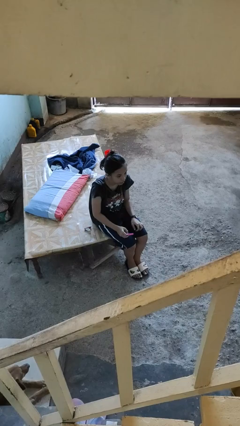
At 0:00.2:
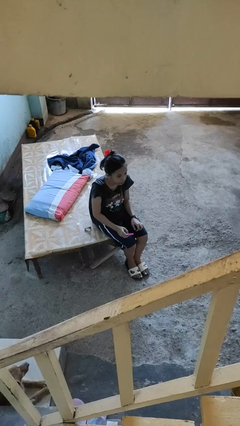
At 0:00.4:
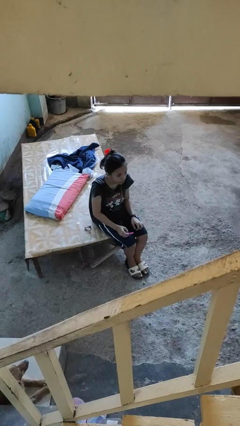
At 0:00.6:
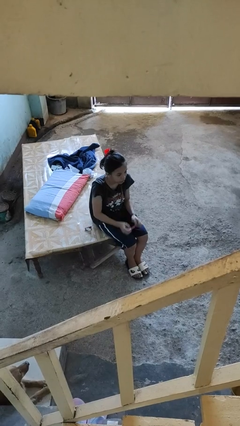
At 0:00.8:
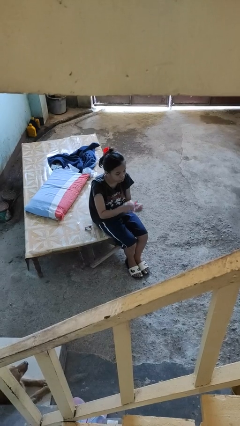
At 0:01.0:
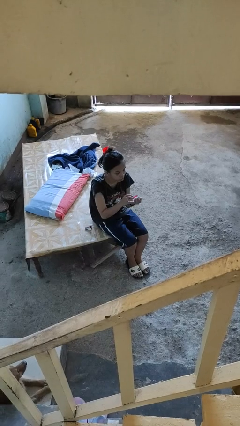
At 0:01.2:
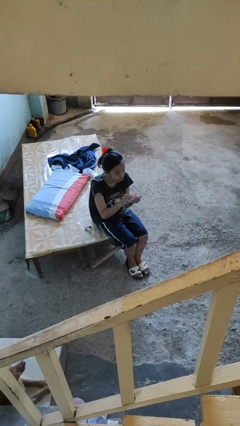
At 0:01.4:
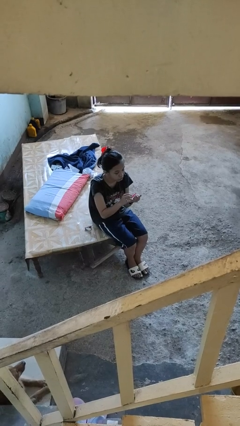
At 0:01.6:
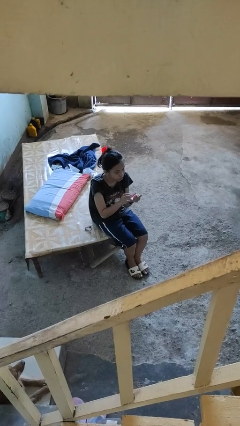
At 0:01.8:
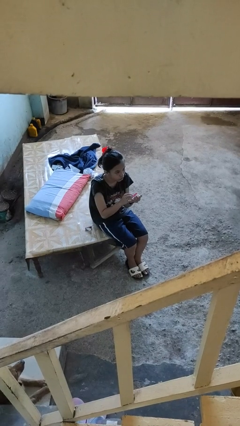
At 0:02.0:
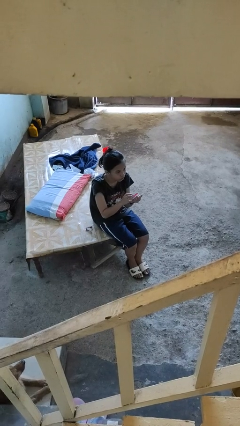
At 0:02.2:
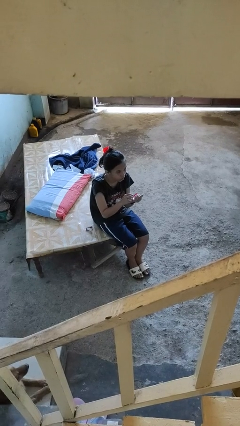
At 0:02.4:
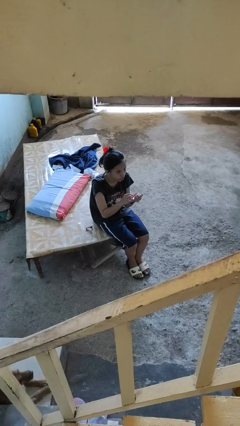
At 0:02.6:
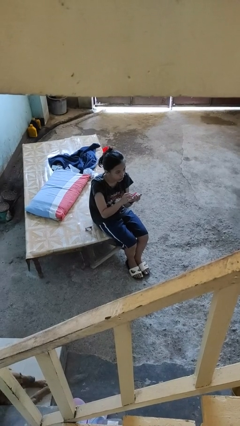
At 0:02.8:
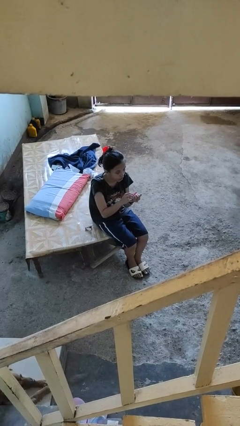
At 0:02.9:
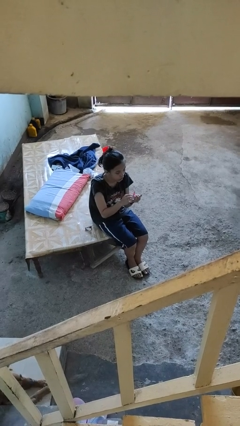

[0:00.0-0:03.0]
person files fingernails

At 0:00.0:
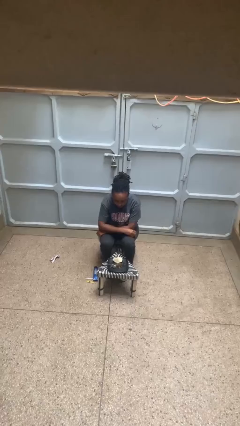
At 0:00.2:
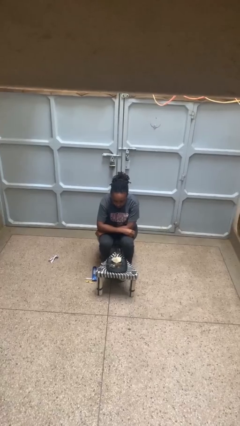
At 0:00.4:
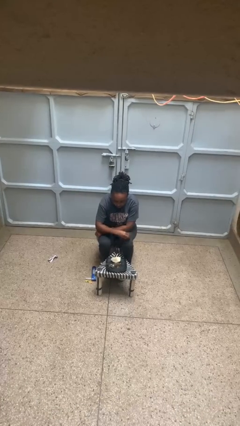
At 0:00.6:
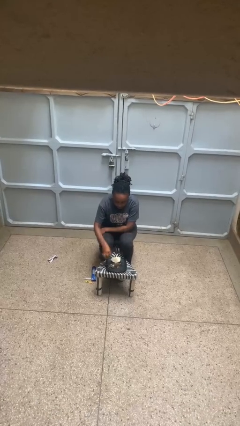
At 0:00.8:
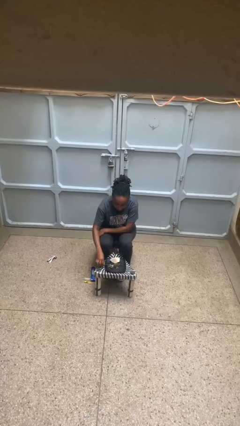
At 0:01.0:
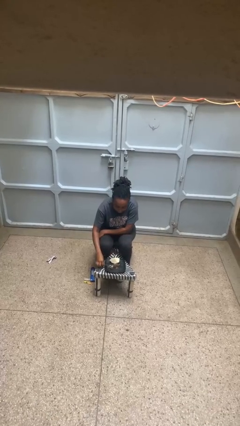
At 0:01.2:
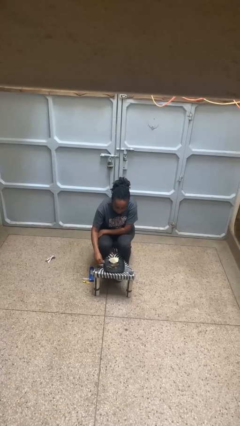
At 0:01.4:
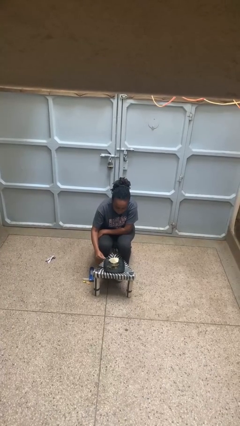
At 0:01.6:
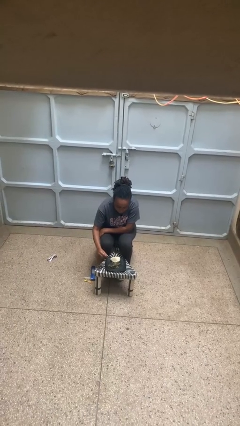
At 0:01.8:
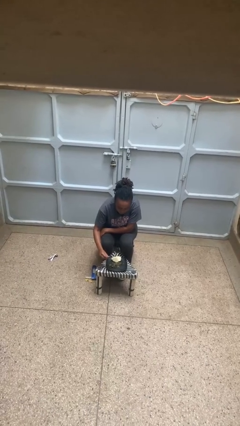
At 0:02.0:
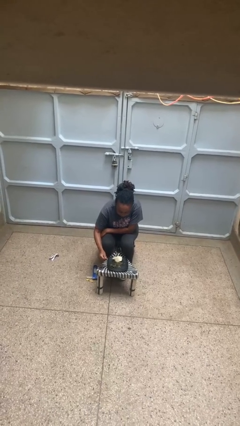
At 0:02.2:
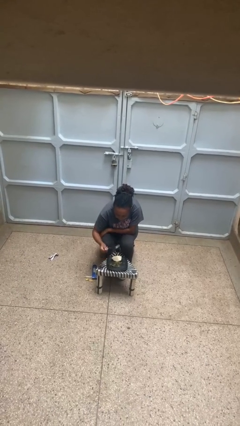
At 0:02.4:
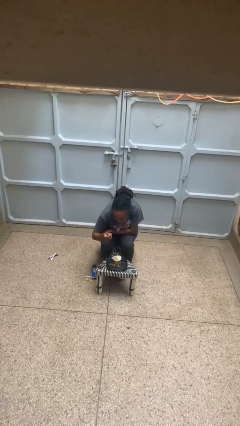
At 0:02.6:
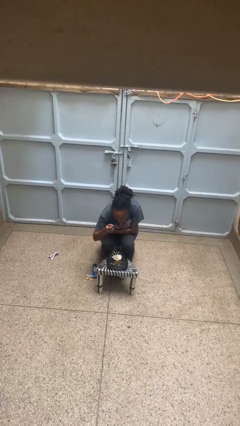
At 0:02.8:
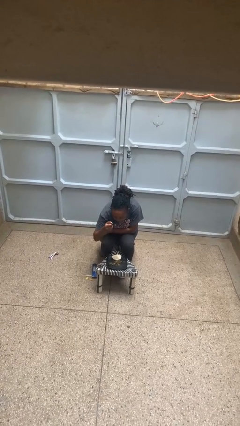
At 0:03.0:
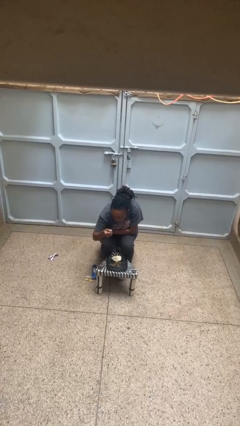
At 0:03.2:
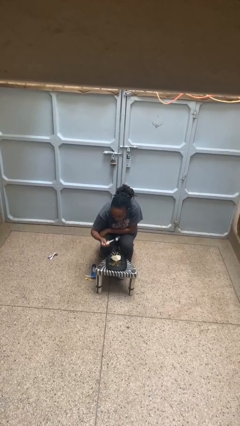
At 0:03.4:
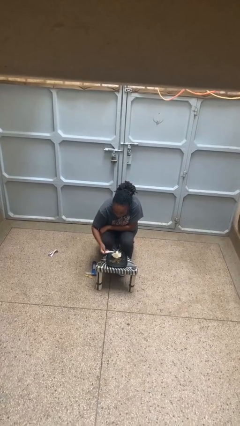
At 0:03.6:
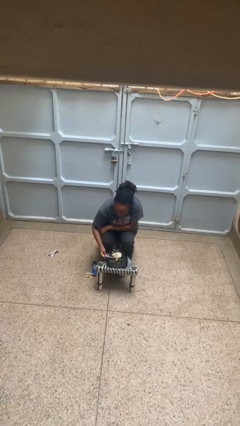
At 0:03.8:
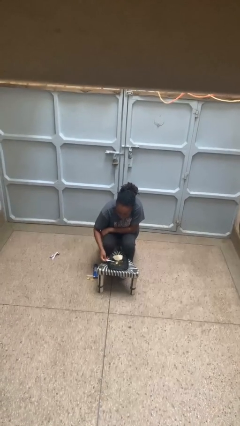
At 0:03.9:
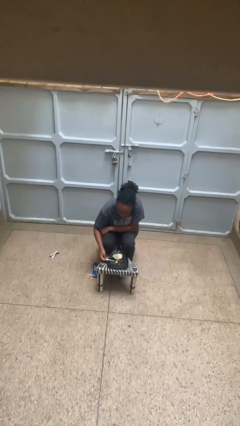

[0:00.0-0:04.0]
person eats with utensil

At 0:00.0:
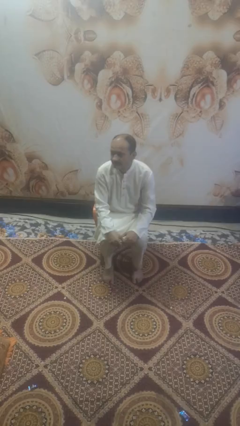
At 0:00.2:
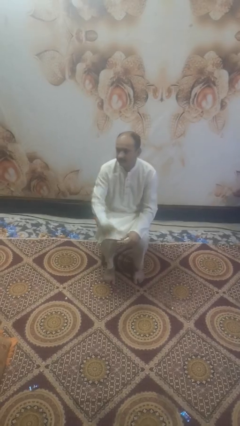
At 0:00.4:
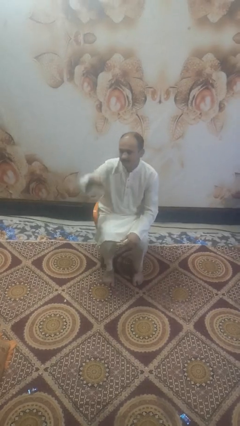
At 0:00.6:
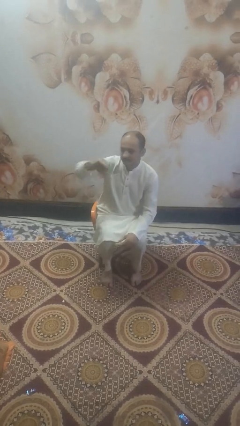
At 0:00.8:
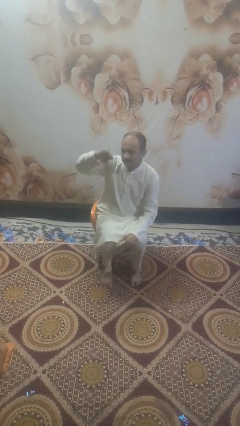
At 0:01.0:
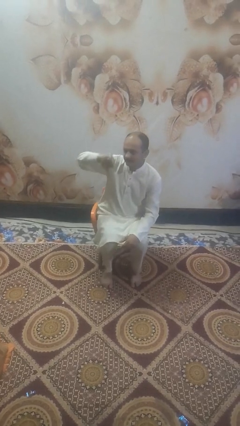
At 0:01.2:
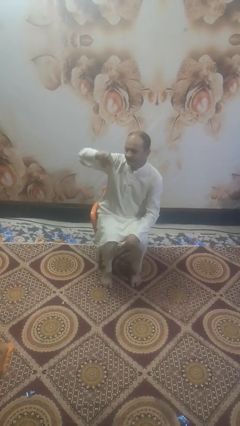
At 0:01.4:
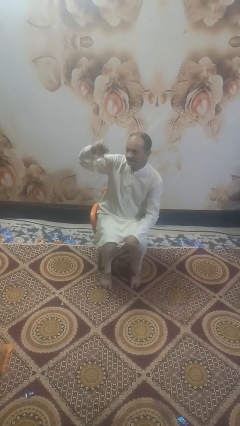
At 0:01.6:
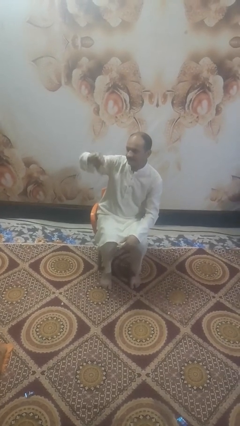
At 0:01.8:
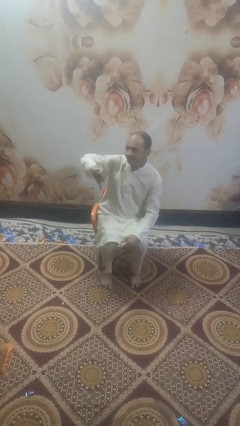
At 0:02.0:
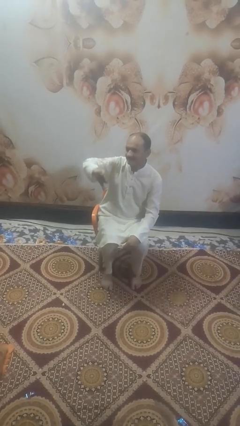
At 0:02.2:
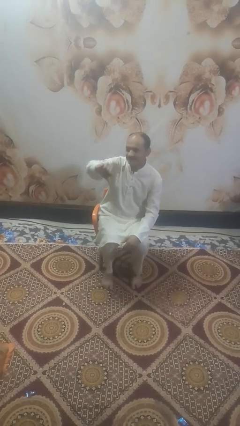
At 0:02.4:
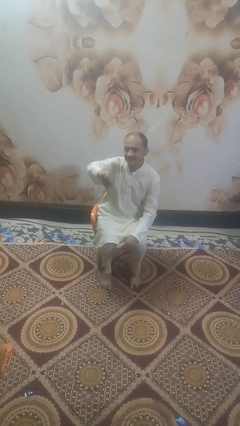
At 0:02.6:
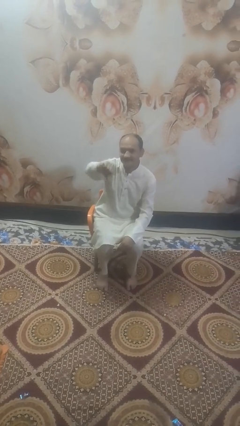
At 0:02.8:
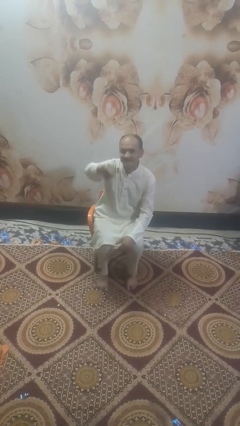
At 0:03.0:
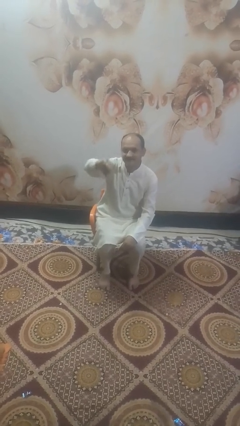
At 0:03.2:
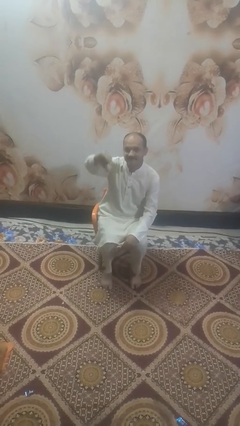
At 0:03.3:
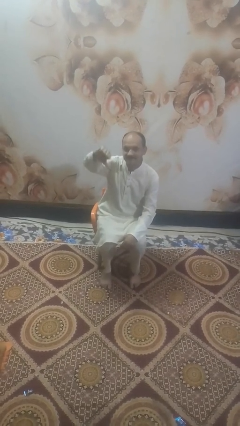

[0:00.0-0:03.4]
person gestures thumbs down

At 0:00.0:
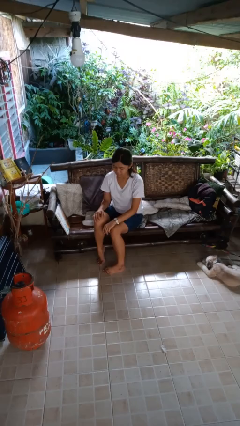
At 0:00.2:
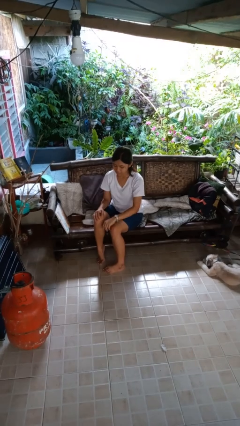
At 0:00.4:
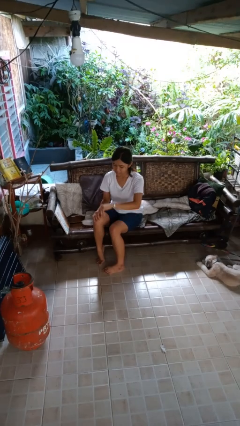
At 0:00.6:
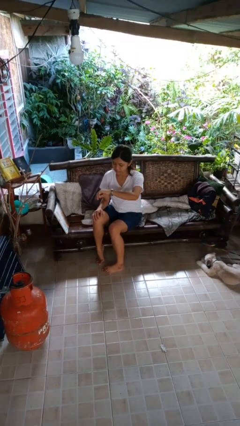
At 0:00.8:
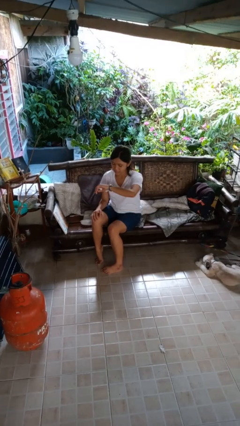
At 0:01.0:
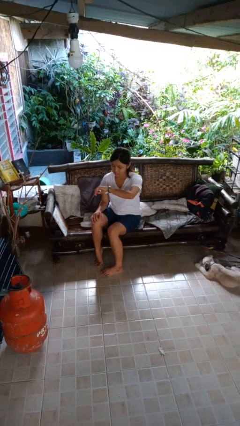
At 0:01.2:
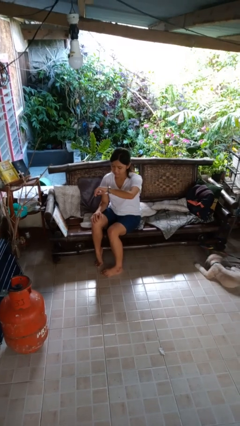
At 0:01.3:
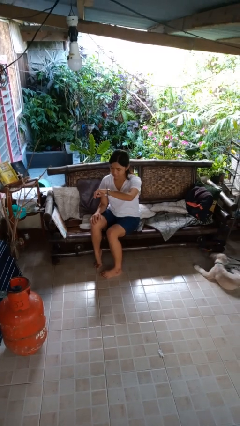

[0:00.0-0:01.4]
person looks at wristwatch

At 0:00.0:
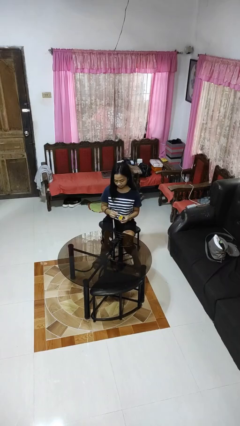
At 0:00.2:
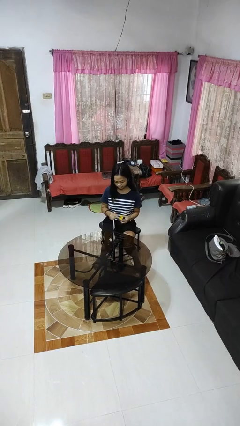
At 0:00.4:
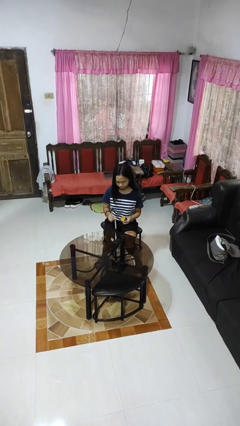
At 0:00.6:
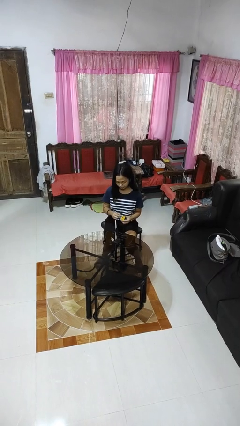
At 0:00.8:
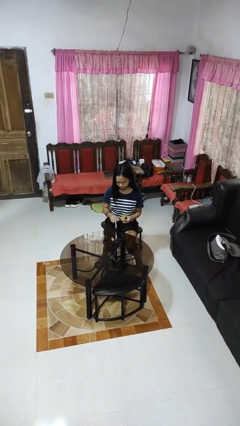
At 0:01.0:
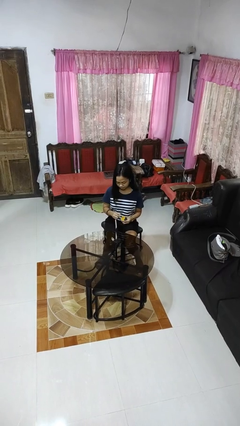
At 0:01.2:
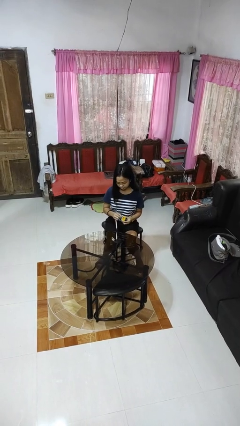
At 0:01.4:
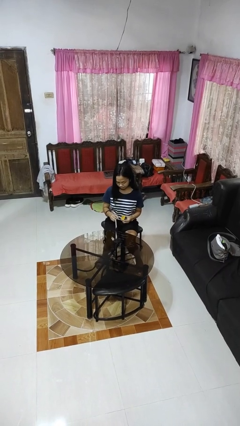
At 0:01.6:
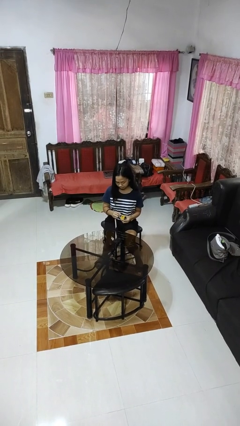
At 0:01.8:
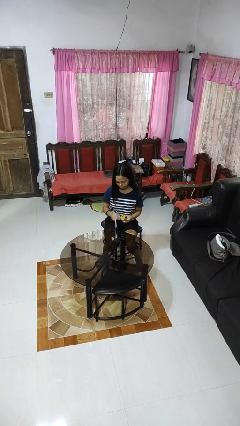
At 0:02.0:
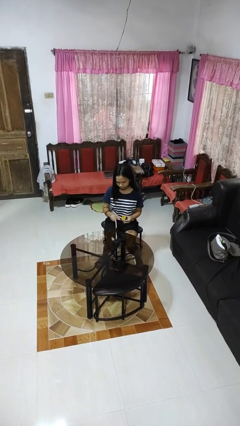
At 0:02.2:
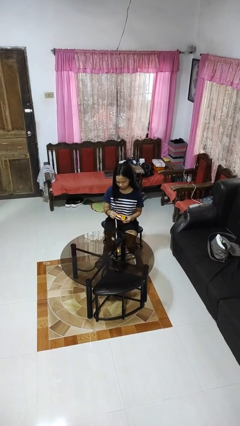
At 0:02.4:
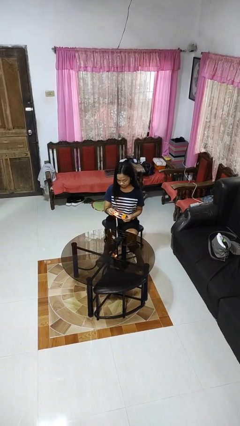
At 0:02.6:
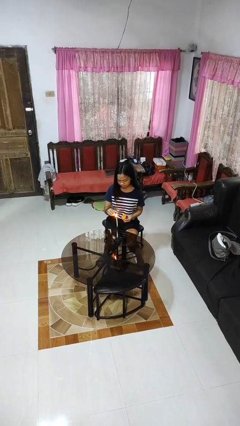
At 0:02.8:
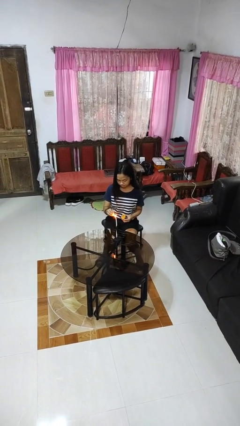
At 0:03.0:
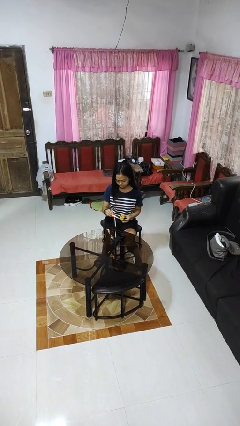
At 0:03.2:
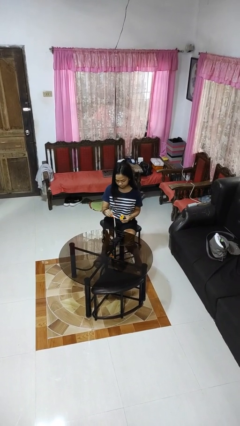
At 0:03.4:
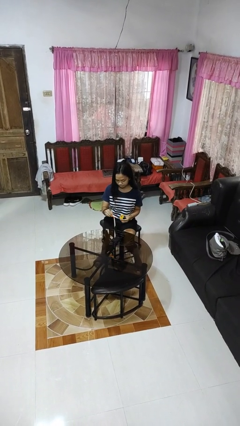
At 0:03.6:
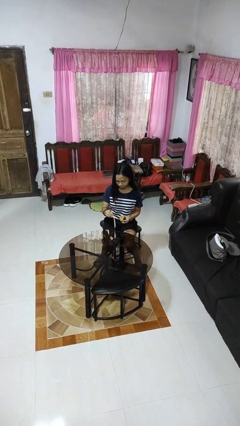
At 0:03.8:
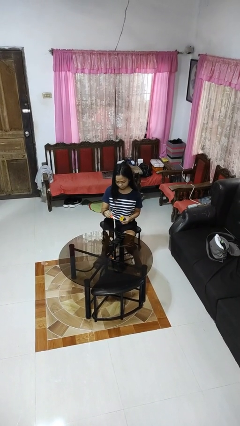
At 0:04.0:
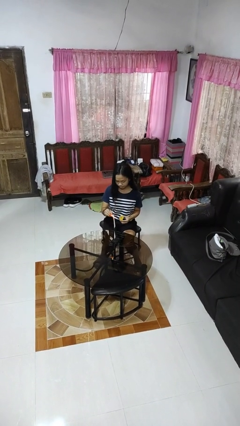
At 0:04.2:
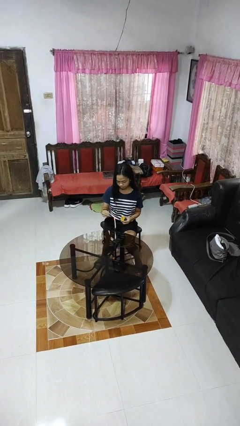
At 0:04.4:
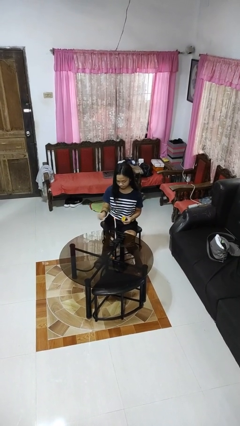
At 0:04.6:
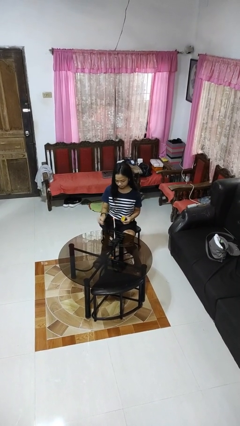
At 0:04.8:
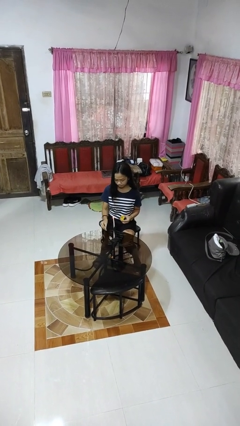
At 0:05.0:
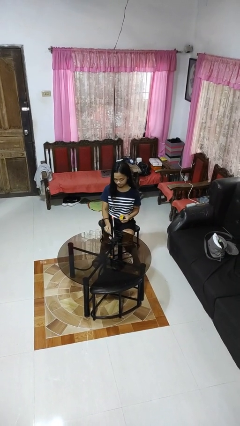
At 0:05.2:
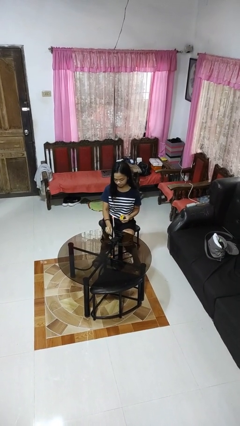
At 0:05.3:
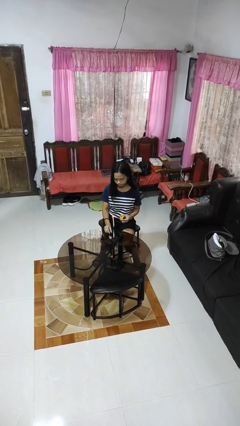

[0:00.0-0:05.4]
person lights candle

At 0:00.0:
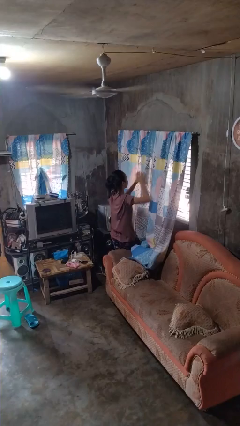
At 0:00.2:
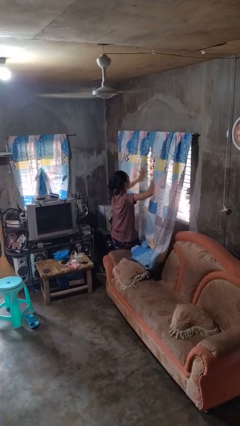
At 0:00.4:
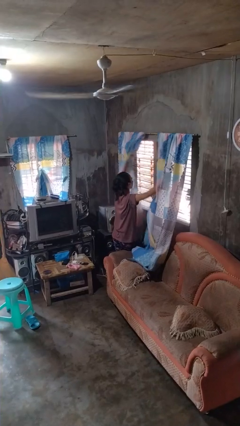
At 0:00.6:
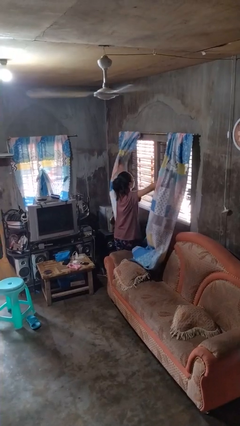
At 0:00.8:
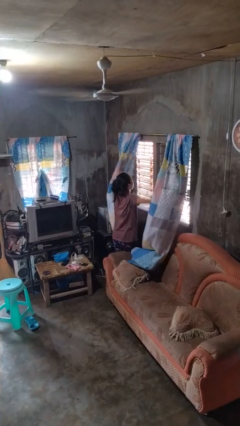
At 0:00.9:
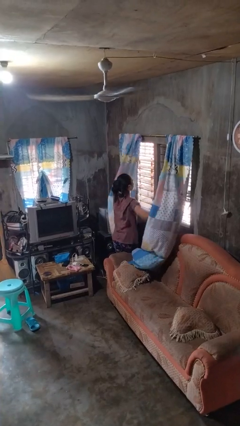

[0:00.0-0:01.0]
person opens curtains
